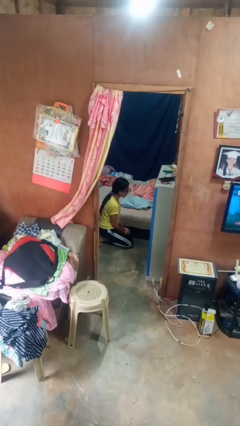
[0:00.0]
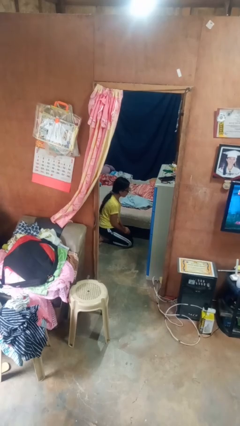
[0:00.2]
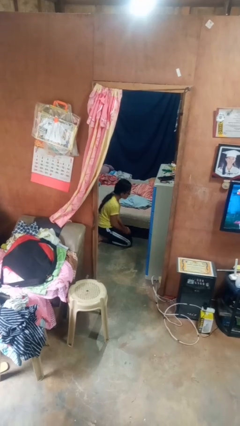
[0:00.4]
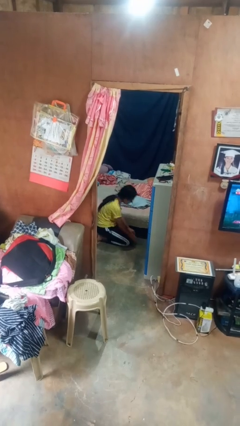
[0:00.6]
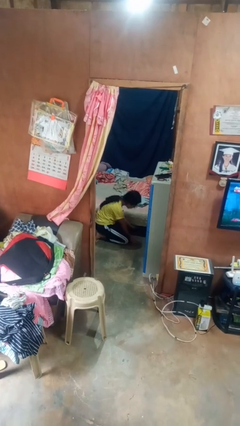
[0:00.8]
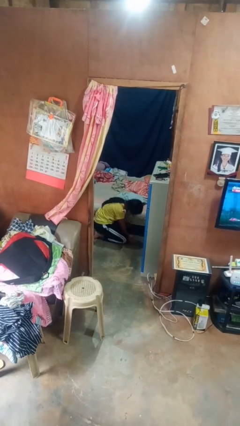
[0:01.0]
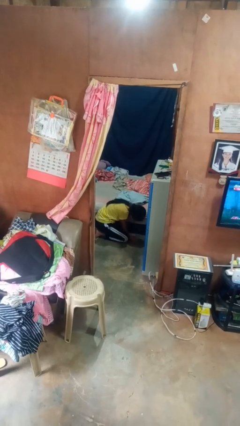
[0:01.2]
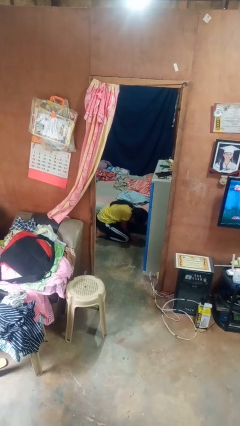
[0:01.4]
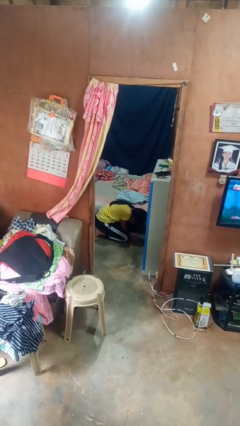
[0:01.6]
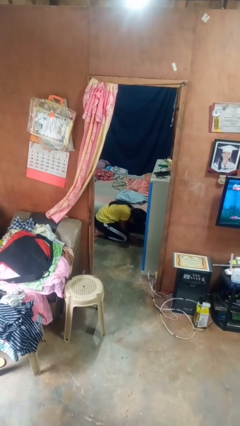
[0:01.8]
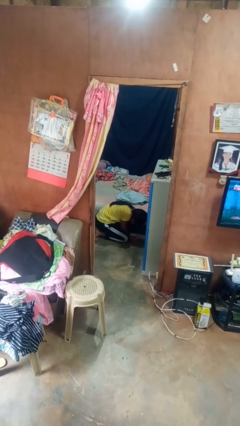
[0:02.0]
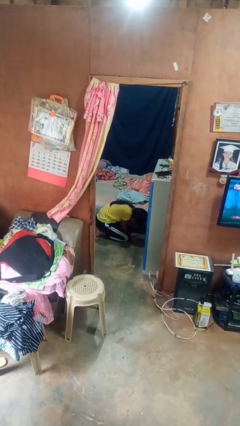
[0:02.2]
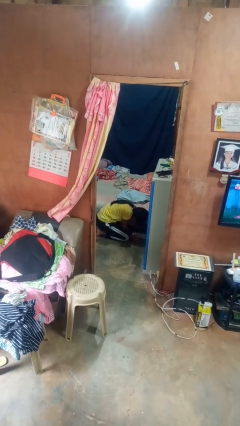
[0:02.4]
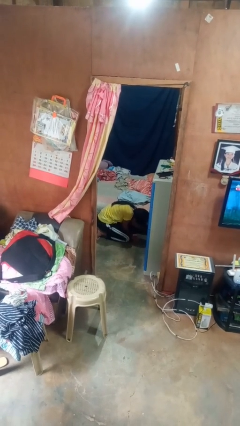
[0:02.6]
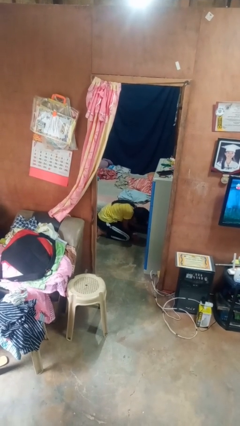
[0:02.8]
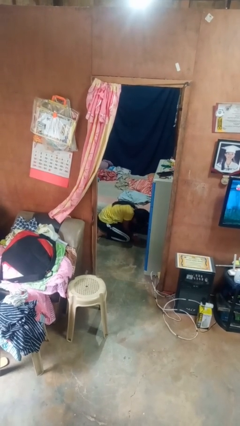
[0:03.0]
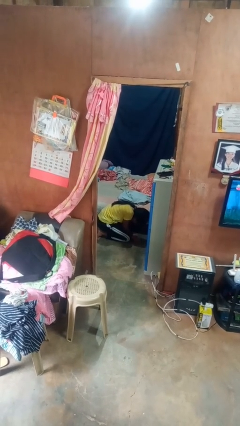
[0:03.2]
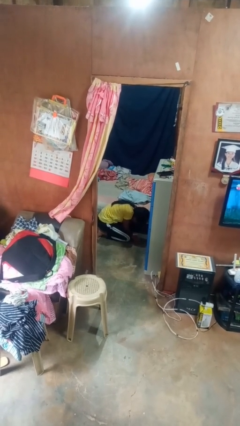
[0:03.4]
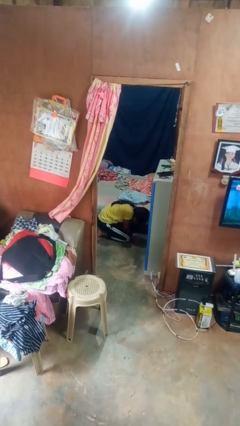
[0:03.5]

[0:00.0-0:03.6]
person searches under bed

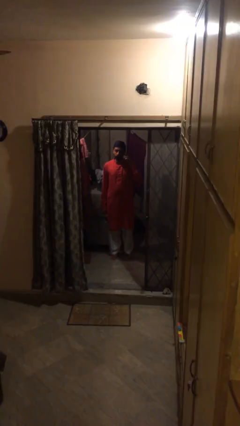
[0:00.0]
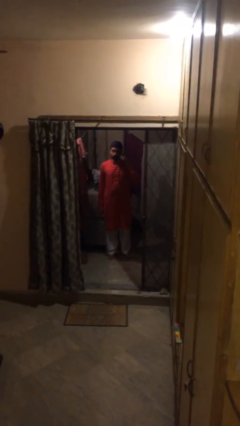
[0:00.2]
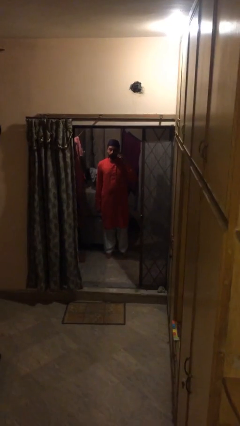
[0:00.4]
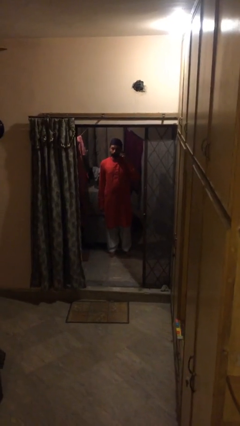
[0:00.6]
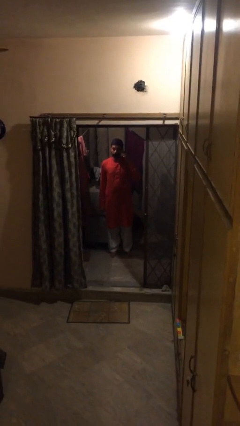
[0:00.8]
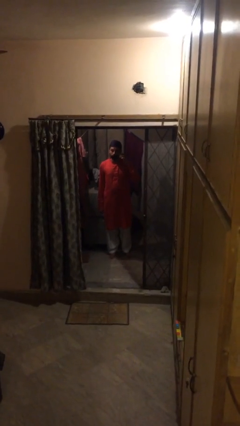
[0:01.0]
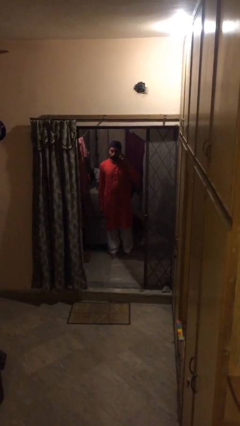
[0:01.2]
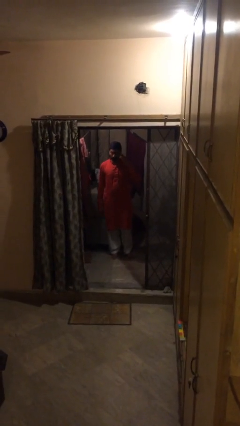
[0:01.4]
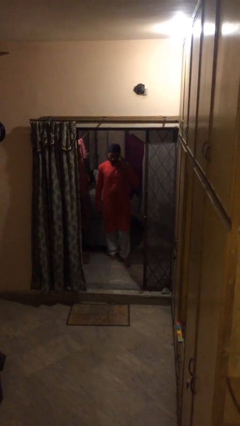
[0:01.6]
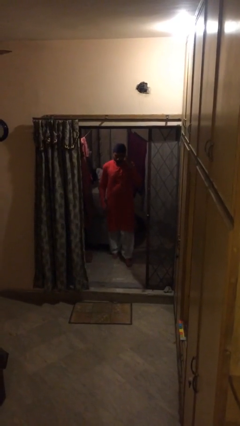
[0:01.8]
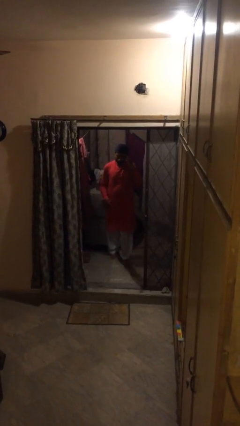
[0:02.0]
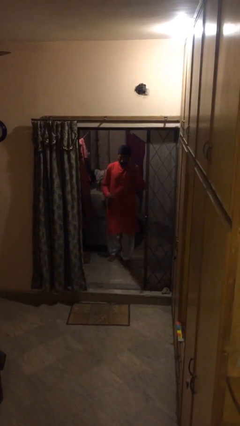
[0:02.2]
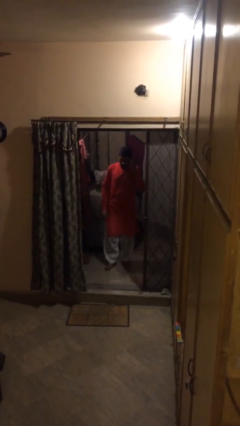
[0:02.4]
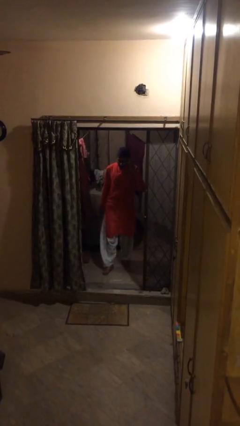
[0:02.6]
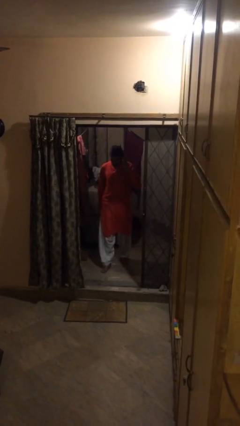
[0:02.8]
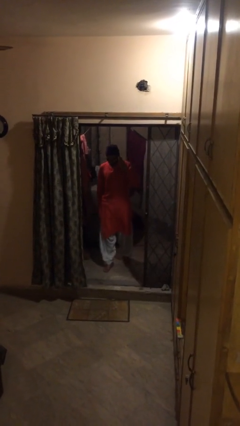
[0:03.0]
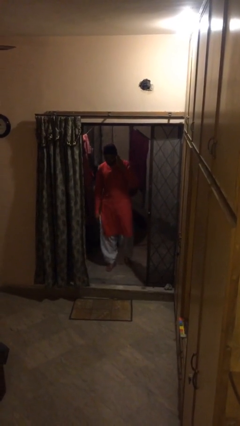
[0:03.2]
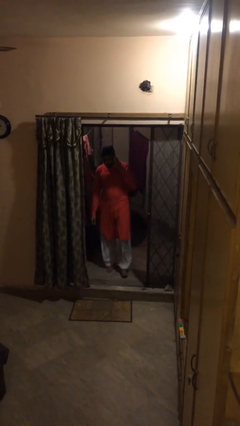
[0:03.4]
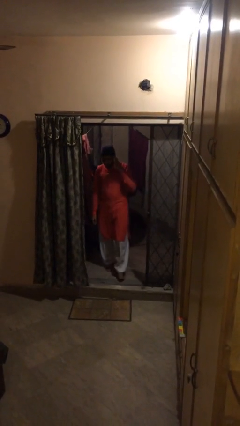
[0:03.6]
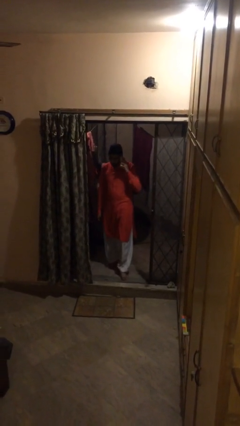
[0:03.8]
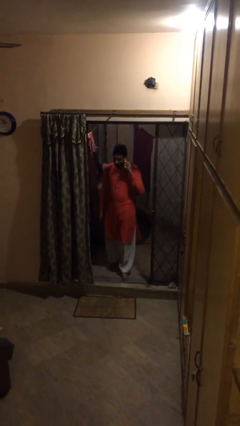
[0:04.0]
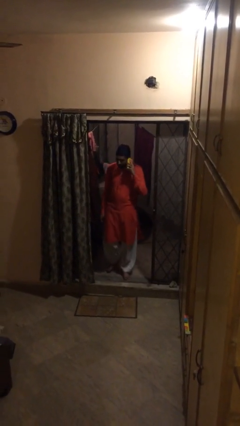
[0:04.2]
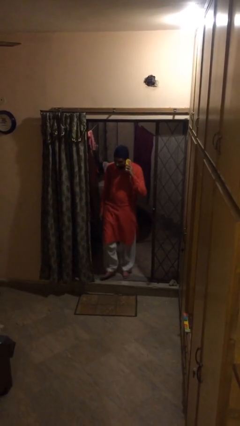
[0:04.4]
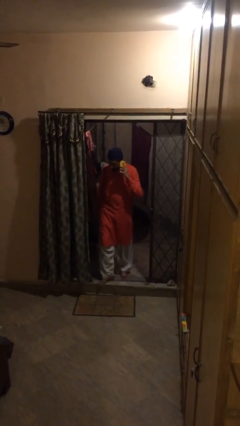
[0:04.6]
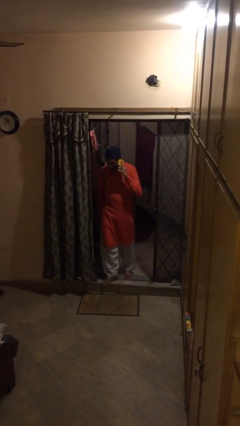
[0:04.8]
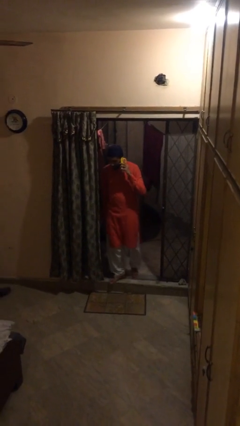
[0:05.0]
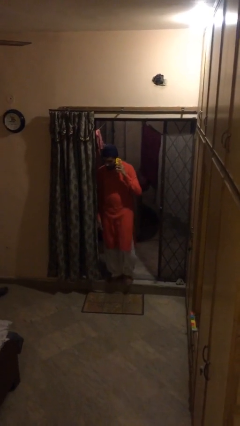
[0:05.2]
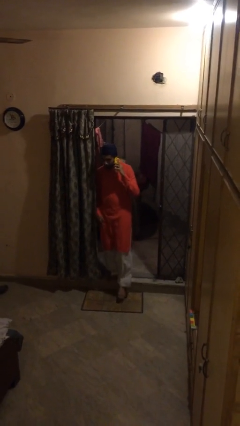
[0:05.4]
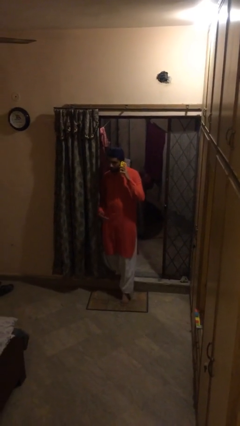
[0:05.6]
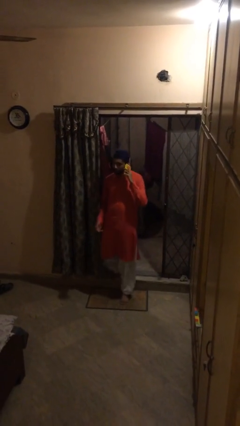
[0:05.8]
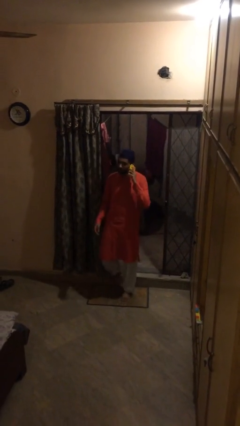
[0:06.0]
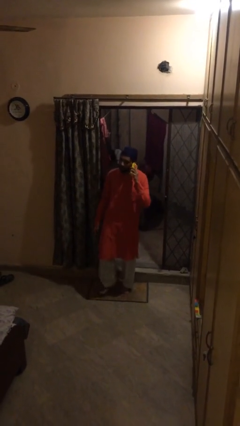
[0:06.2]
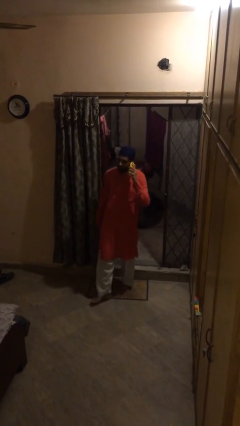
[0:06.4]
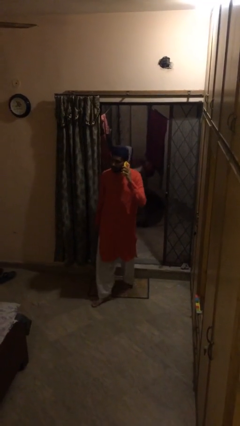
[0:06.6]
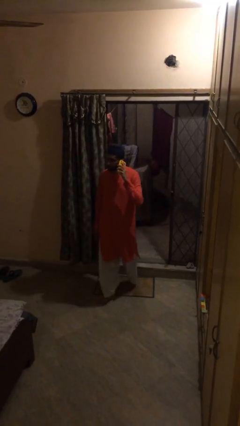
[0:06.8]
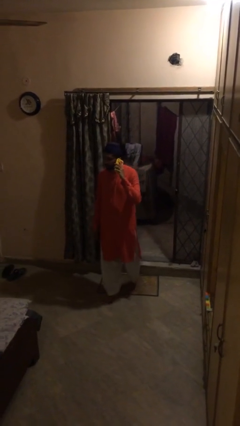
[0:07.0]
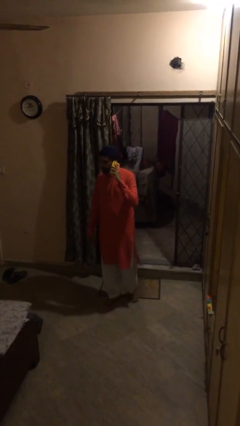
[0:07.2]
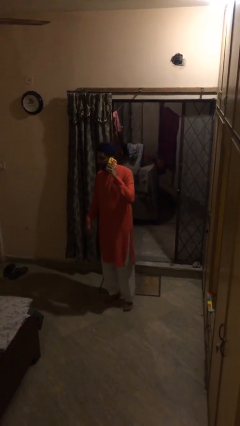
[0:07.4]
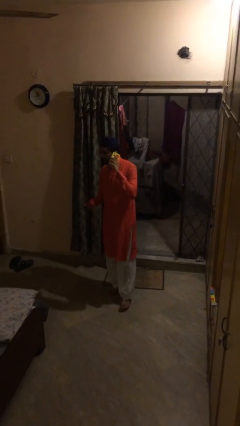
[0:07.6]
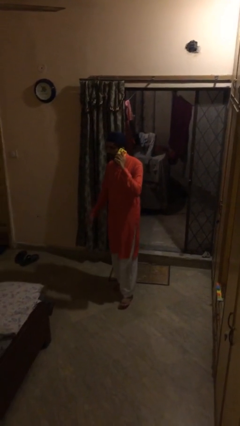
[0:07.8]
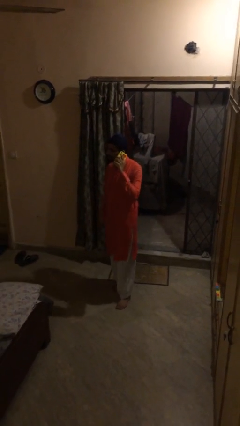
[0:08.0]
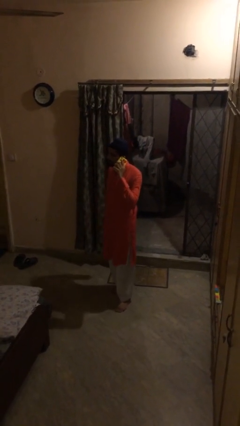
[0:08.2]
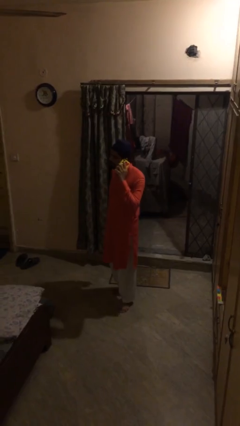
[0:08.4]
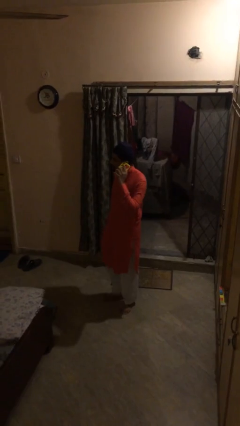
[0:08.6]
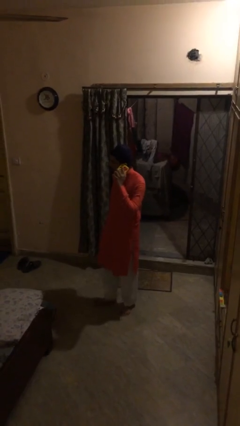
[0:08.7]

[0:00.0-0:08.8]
person enters scene through structure

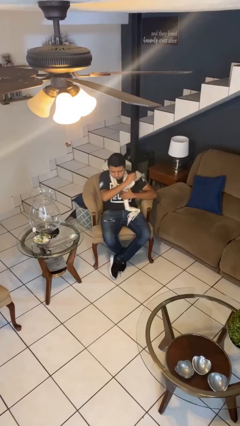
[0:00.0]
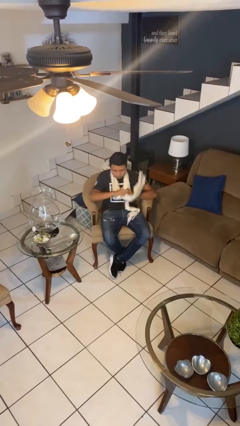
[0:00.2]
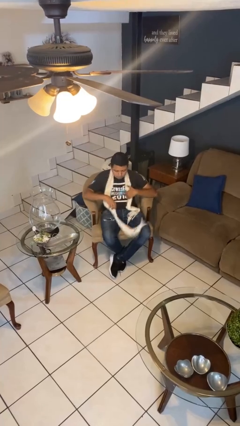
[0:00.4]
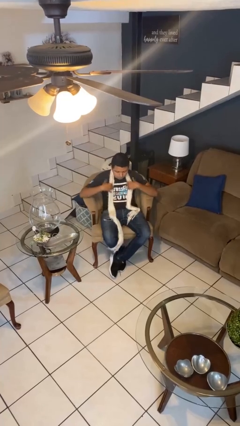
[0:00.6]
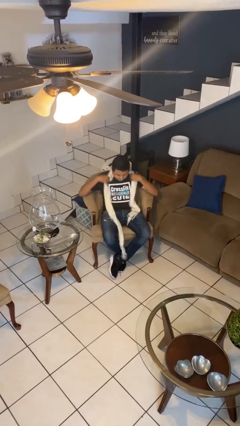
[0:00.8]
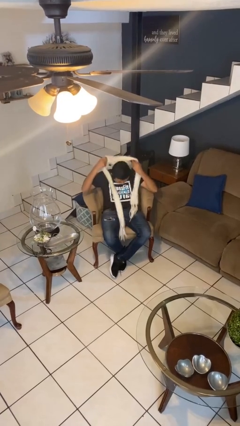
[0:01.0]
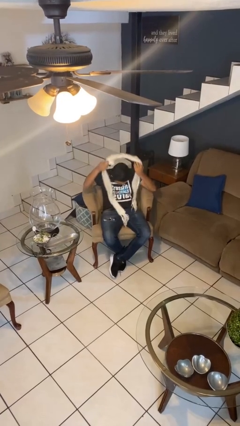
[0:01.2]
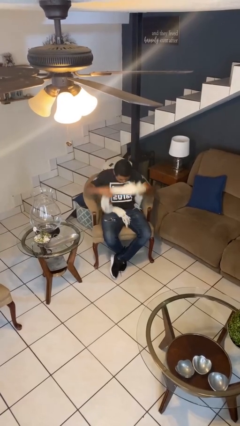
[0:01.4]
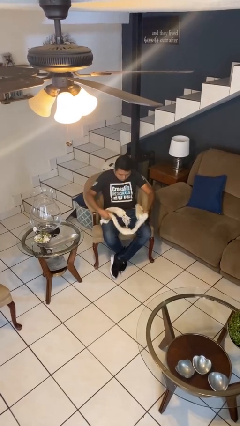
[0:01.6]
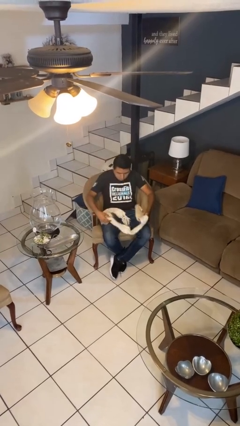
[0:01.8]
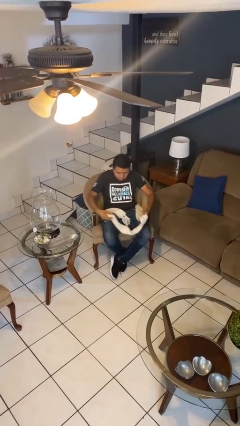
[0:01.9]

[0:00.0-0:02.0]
person takes off scarf

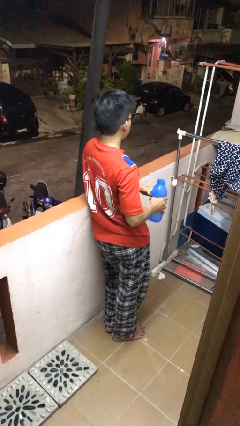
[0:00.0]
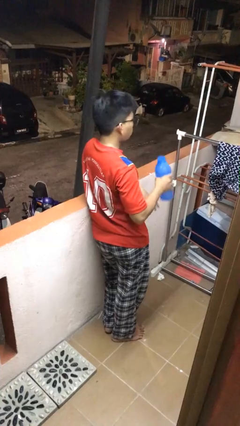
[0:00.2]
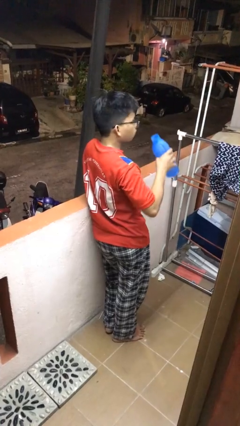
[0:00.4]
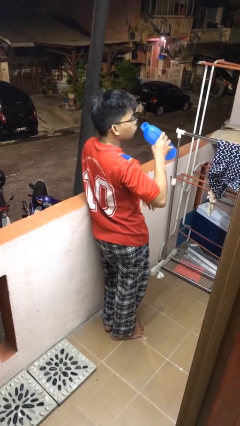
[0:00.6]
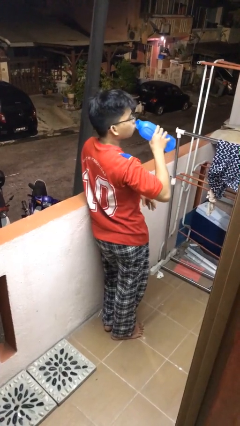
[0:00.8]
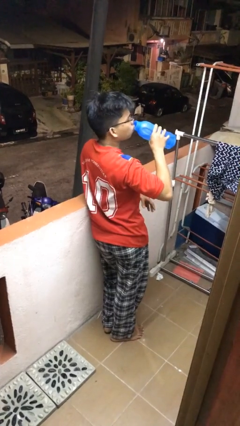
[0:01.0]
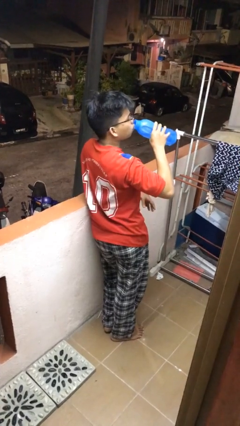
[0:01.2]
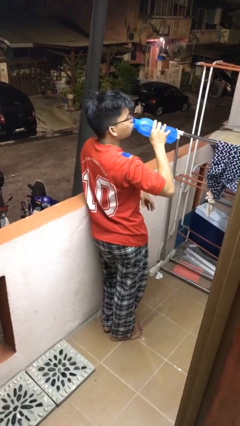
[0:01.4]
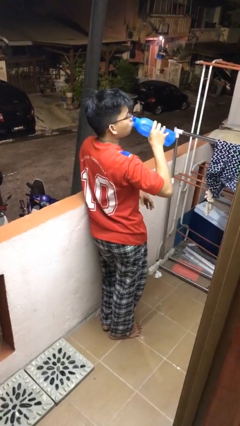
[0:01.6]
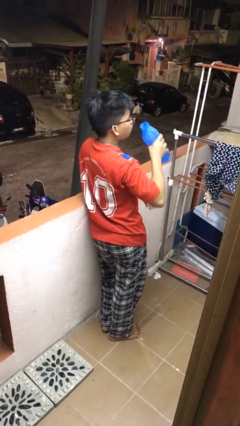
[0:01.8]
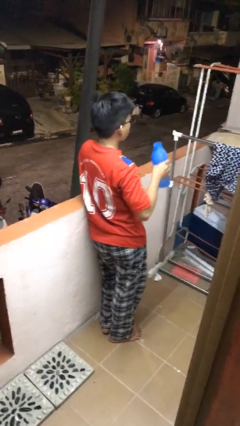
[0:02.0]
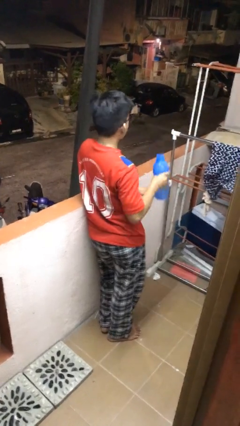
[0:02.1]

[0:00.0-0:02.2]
person drinks from bottle

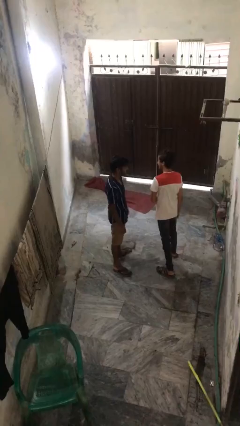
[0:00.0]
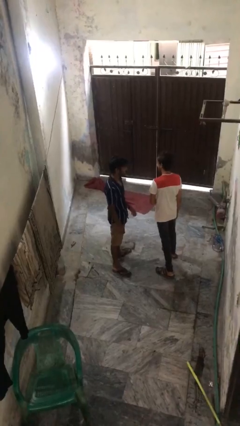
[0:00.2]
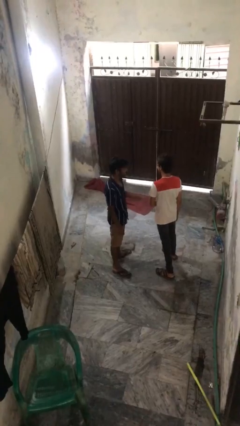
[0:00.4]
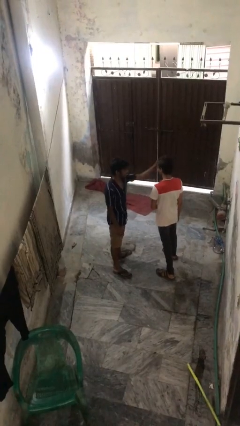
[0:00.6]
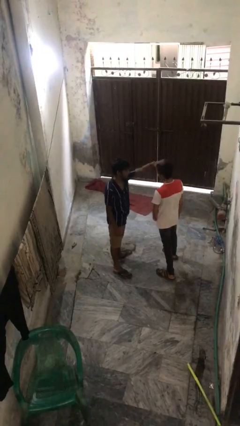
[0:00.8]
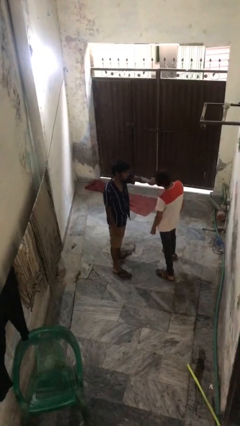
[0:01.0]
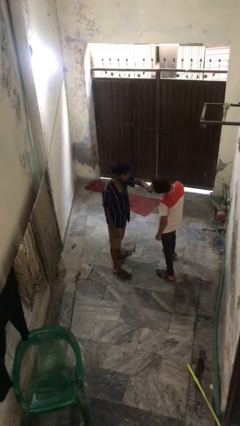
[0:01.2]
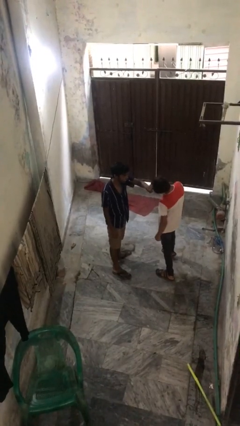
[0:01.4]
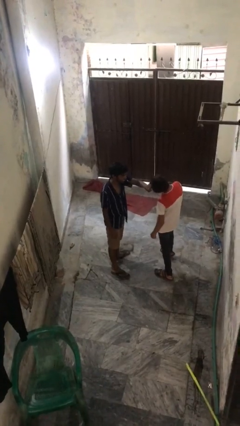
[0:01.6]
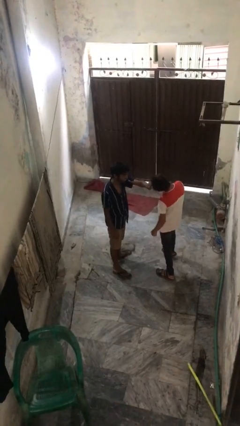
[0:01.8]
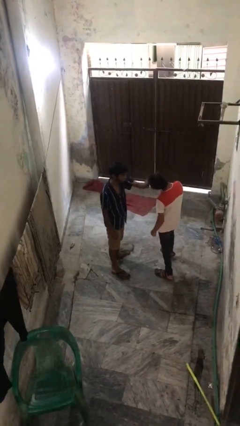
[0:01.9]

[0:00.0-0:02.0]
person grabs person by hair
